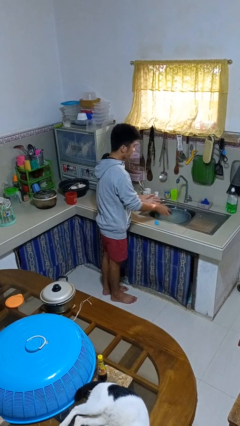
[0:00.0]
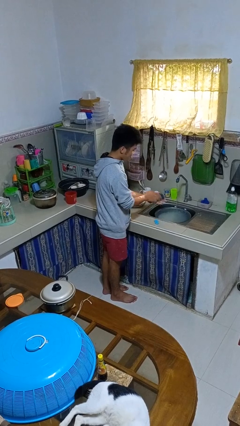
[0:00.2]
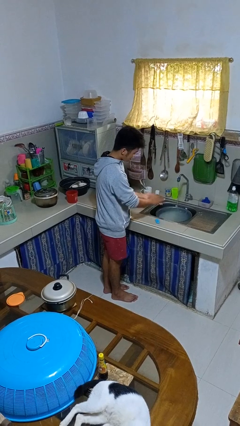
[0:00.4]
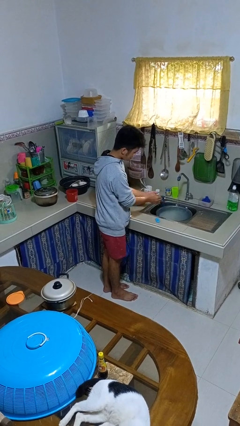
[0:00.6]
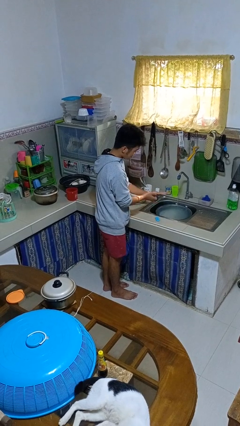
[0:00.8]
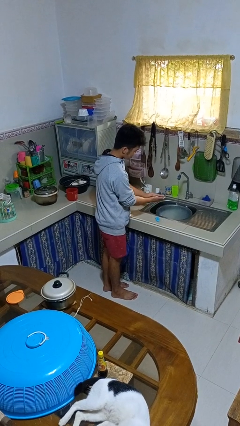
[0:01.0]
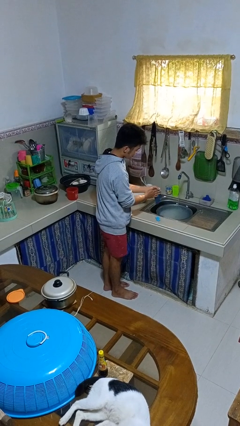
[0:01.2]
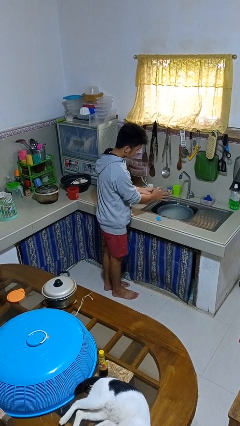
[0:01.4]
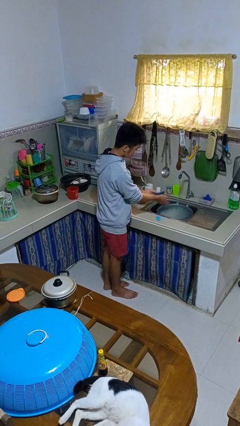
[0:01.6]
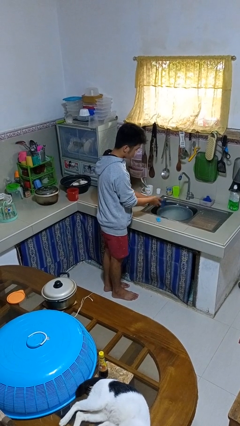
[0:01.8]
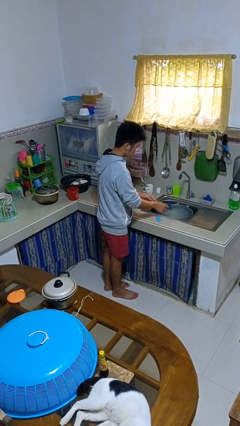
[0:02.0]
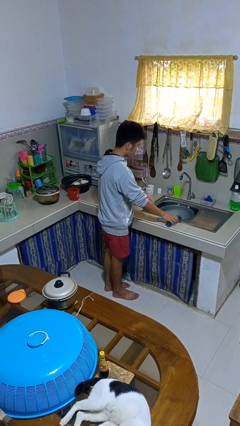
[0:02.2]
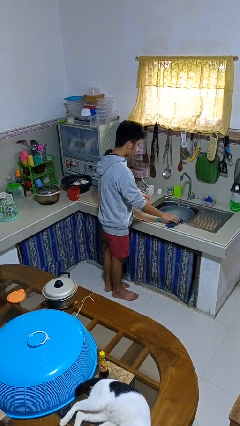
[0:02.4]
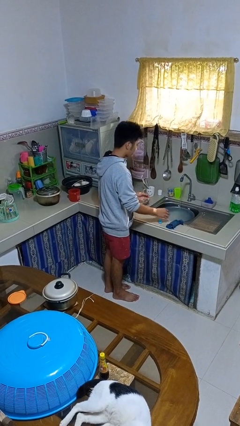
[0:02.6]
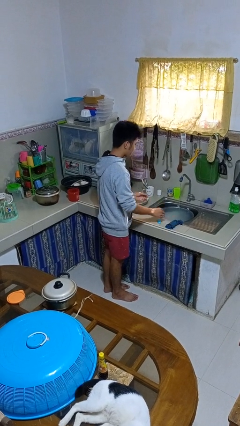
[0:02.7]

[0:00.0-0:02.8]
person dries hands with towel

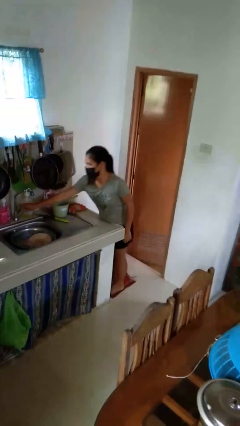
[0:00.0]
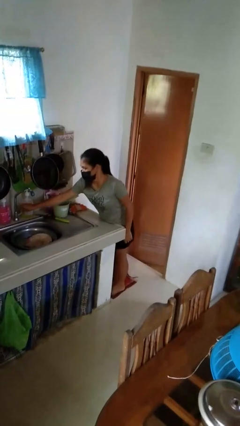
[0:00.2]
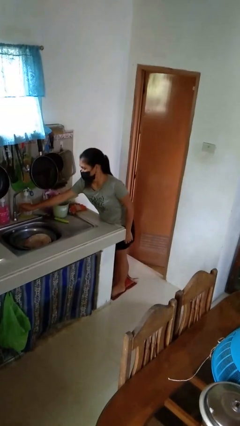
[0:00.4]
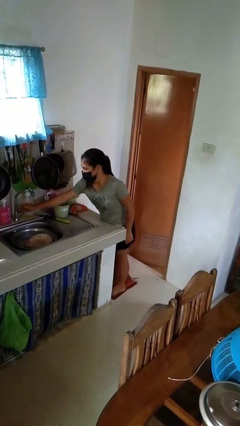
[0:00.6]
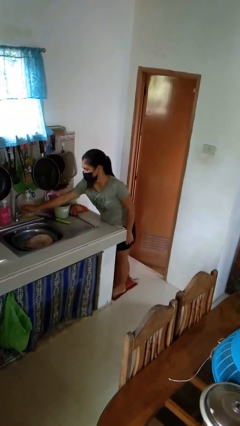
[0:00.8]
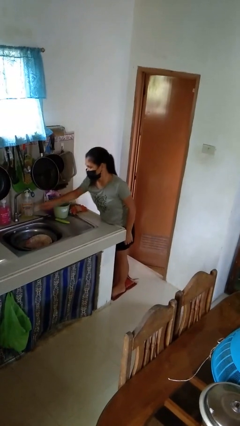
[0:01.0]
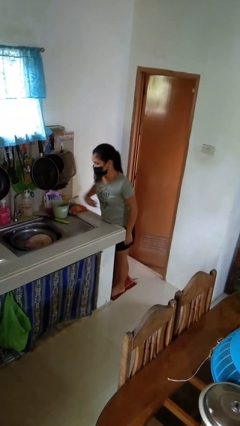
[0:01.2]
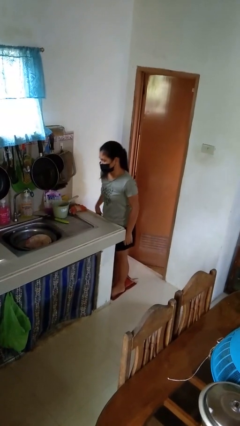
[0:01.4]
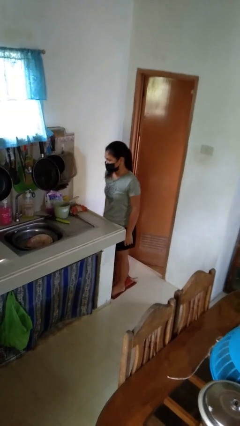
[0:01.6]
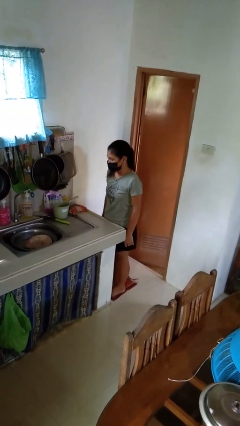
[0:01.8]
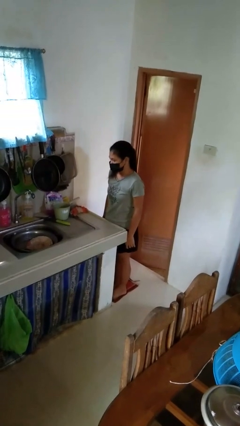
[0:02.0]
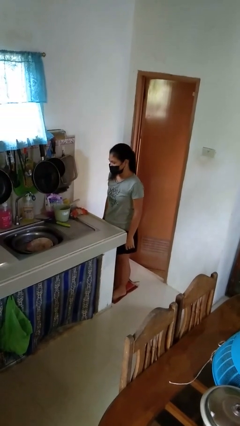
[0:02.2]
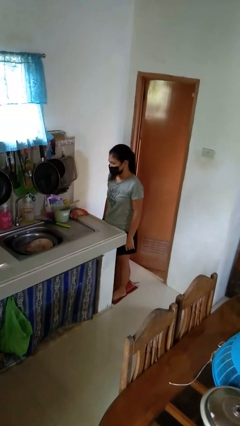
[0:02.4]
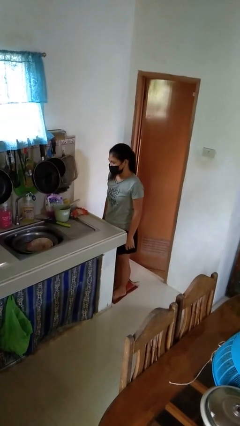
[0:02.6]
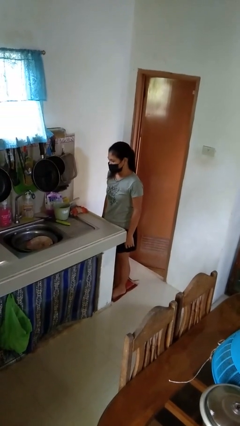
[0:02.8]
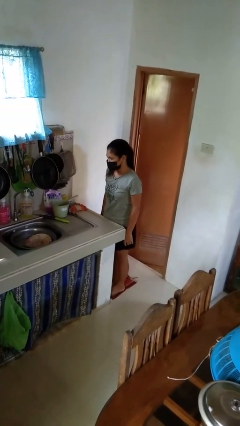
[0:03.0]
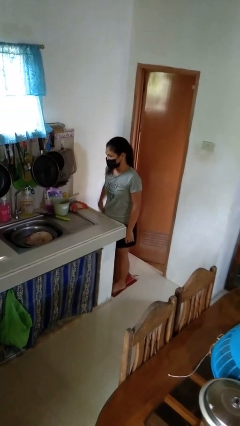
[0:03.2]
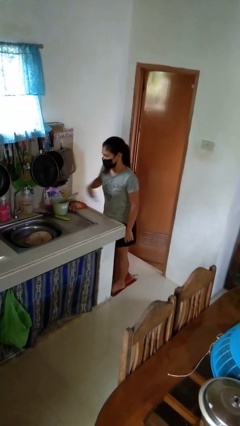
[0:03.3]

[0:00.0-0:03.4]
person turns on faucet

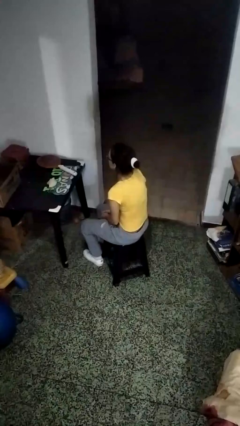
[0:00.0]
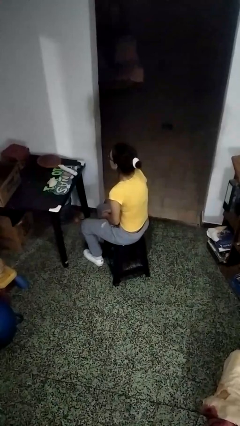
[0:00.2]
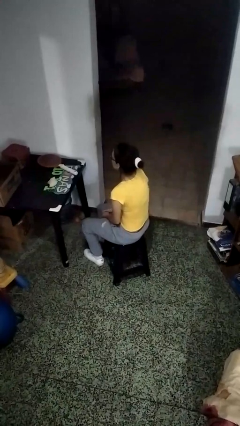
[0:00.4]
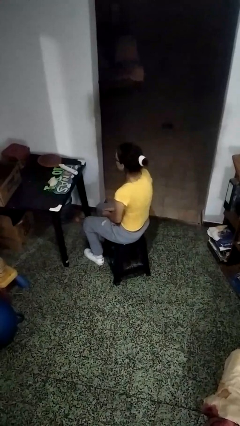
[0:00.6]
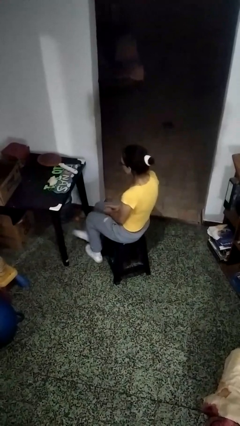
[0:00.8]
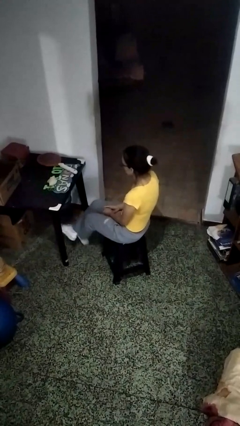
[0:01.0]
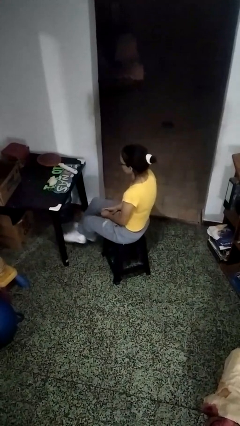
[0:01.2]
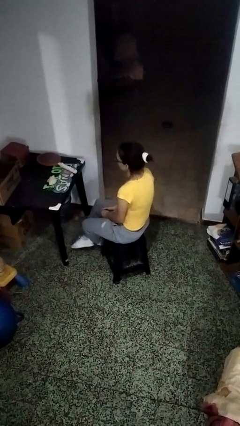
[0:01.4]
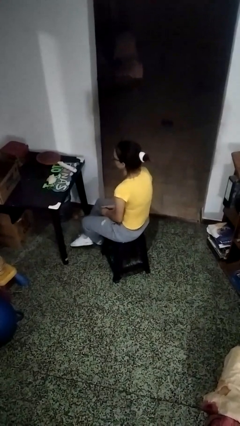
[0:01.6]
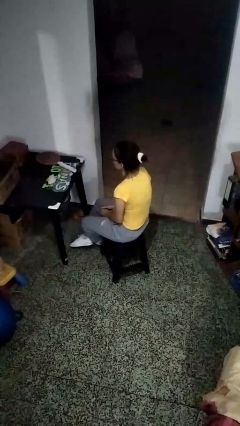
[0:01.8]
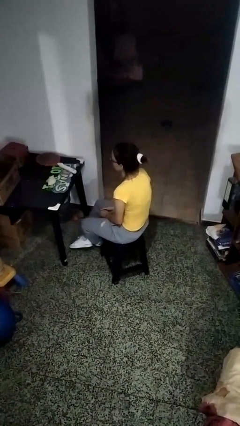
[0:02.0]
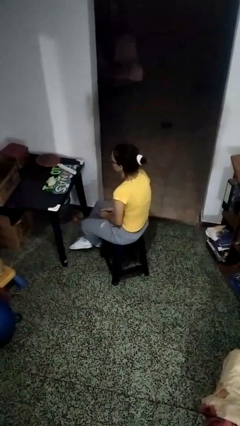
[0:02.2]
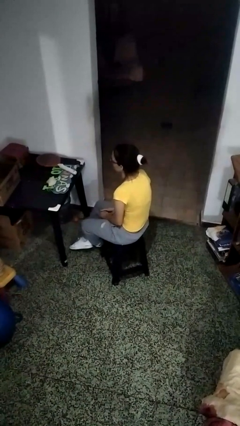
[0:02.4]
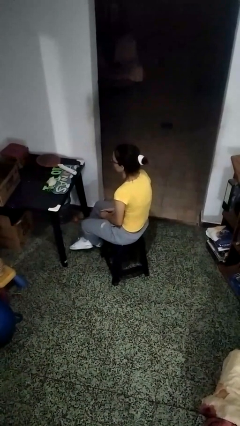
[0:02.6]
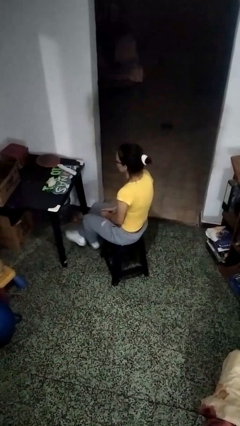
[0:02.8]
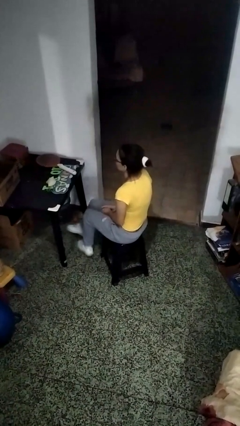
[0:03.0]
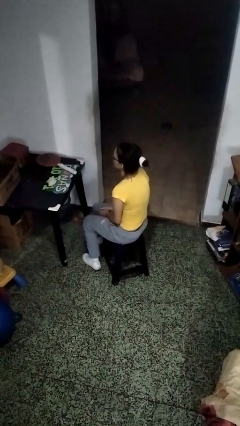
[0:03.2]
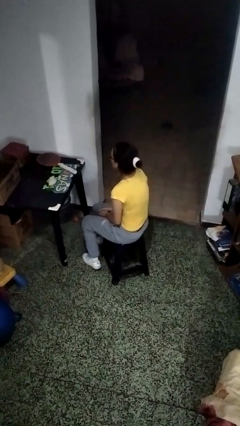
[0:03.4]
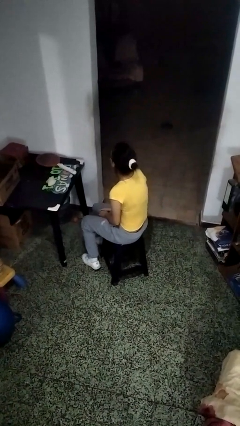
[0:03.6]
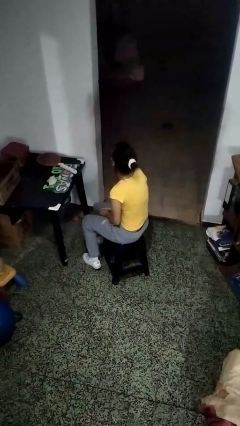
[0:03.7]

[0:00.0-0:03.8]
person crosses legs

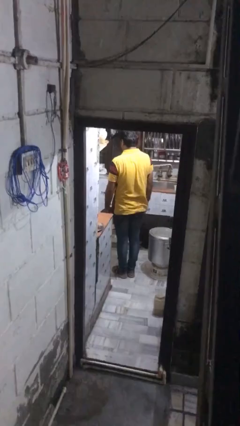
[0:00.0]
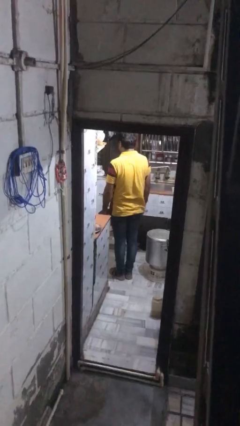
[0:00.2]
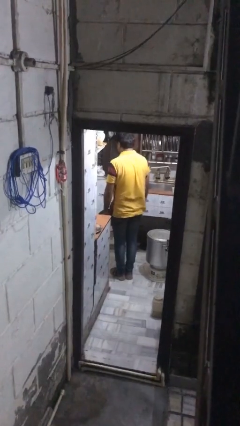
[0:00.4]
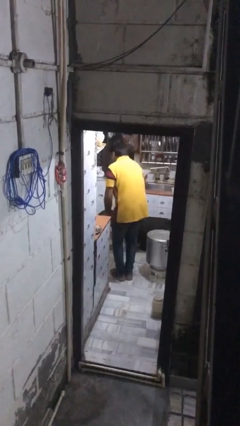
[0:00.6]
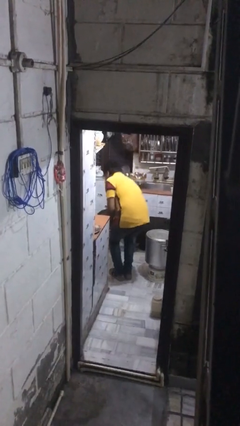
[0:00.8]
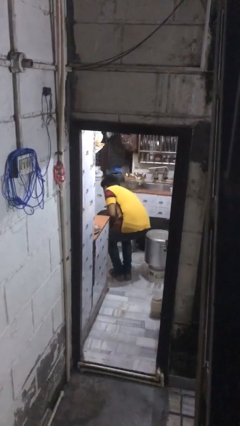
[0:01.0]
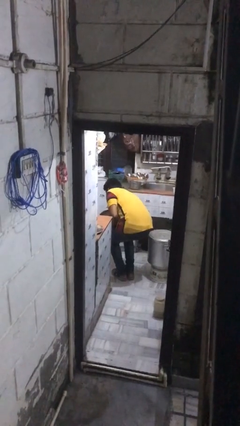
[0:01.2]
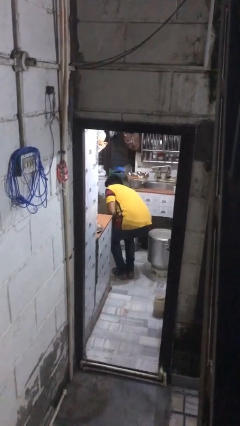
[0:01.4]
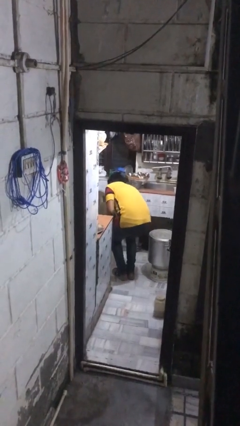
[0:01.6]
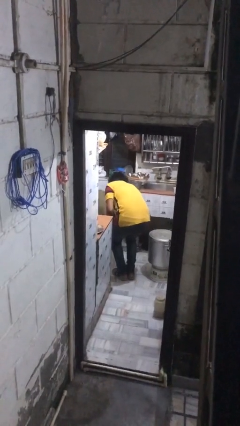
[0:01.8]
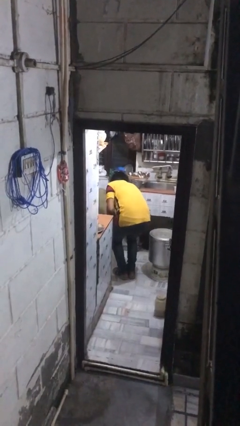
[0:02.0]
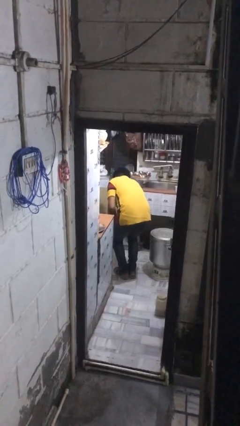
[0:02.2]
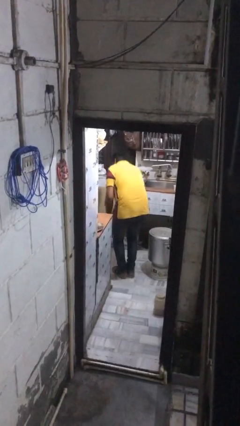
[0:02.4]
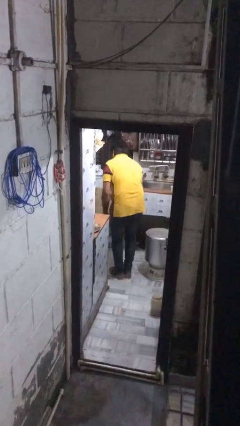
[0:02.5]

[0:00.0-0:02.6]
person opens kitchen drawer

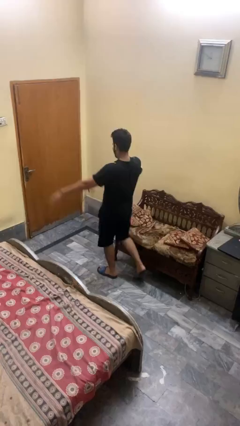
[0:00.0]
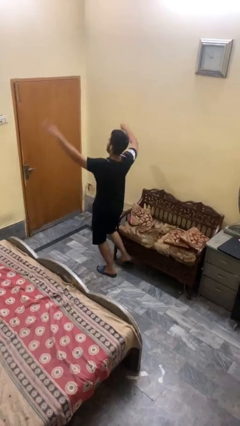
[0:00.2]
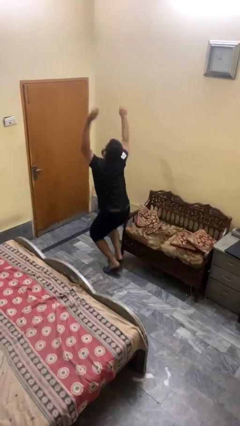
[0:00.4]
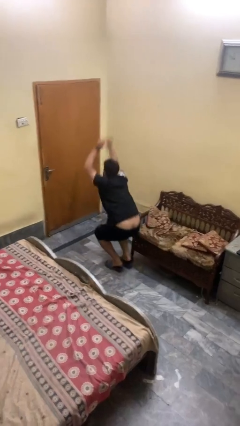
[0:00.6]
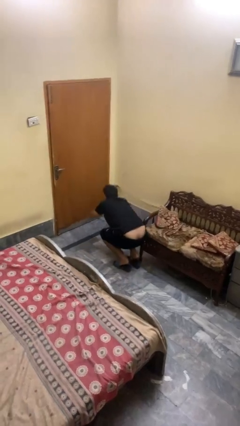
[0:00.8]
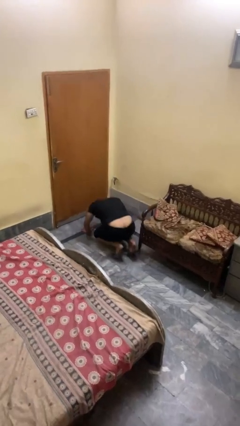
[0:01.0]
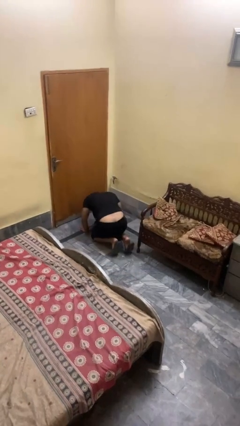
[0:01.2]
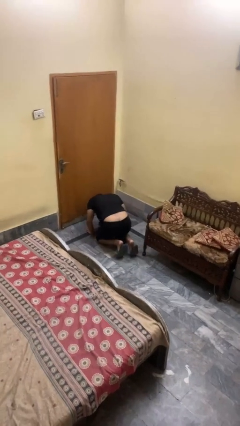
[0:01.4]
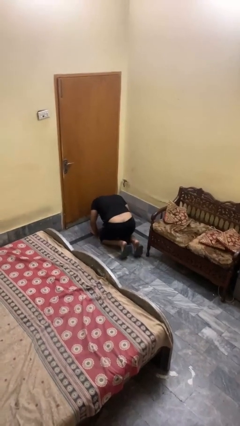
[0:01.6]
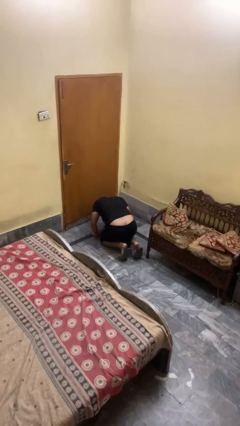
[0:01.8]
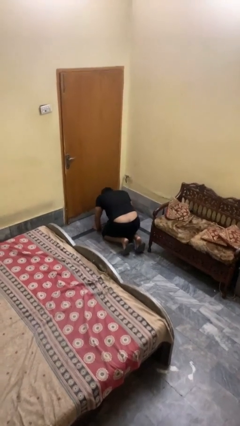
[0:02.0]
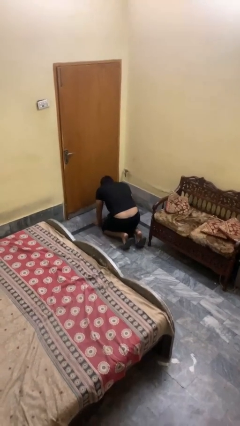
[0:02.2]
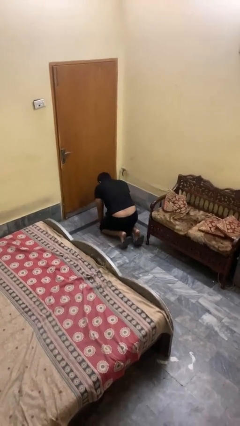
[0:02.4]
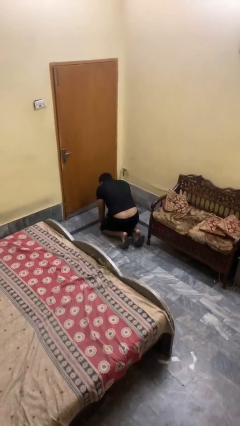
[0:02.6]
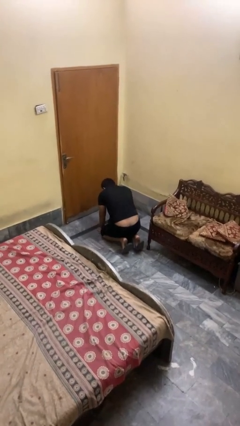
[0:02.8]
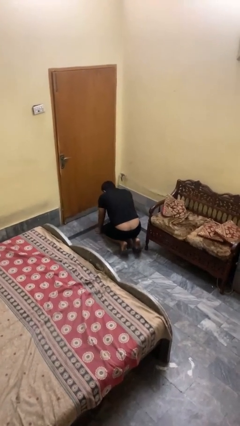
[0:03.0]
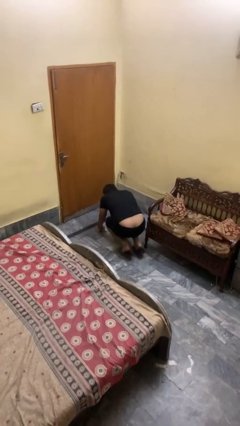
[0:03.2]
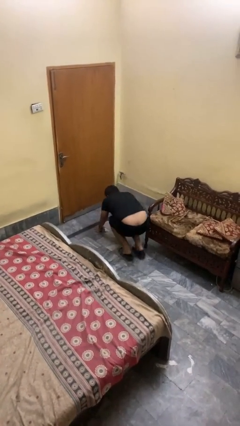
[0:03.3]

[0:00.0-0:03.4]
person trips on object on floor

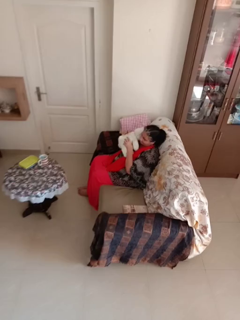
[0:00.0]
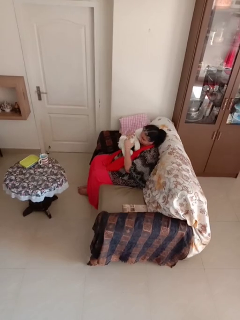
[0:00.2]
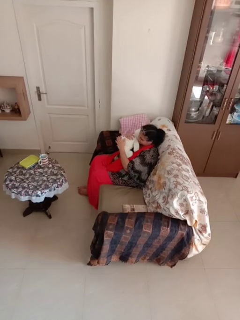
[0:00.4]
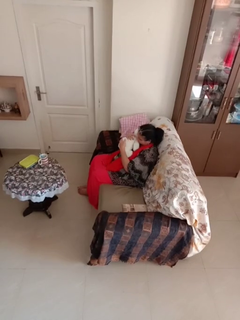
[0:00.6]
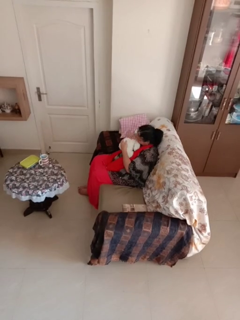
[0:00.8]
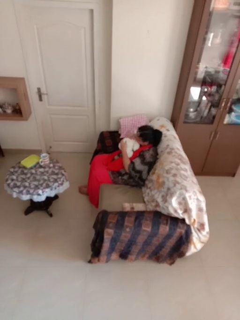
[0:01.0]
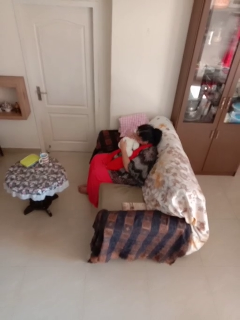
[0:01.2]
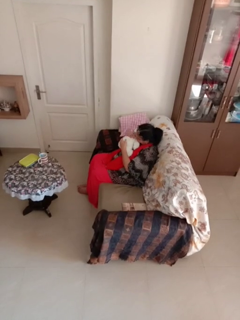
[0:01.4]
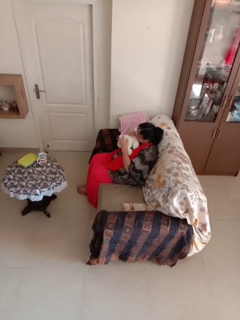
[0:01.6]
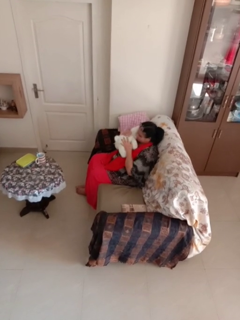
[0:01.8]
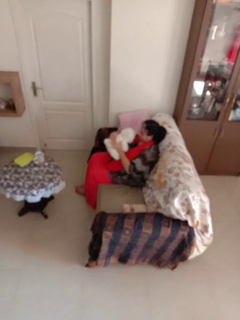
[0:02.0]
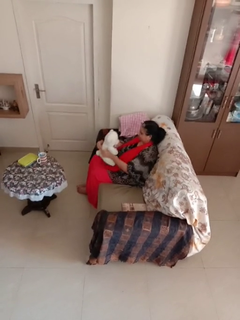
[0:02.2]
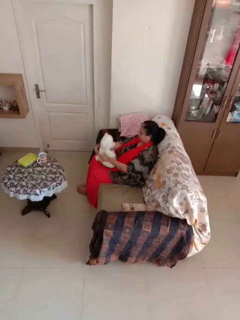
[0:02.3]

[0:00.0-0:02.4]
person hugs stuffed animal

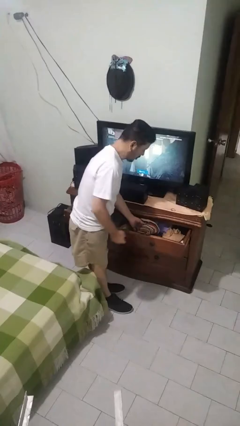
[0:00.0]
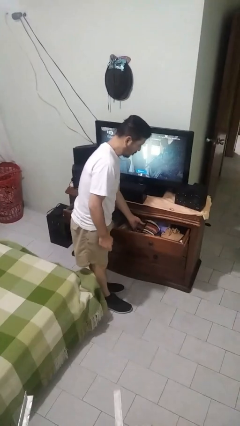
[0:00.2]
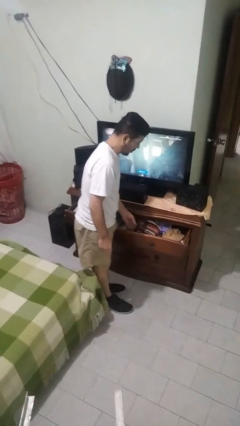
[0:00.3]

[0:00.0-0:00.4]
person puts clothes into dresser
